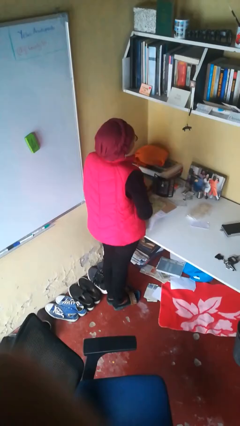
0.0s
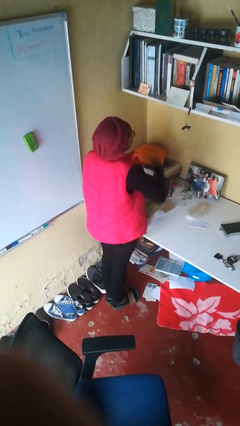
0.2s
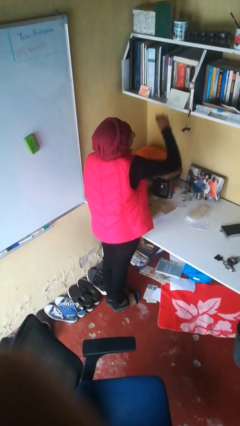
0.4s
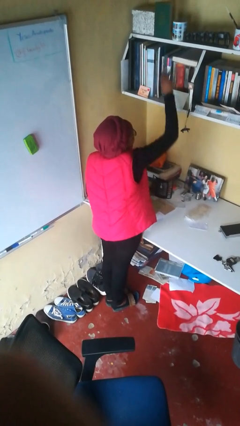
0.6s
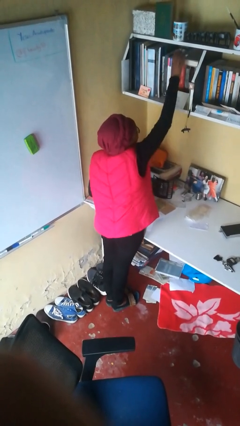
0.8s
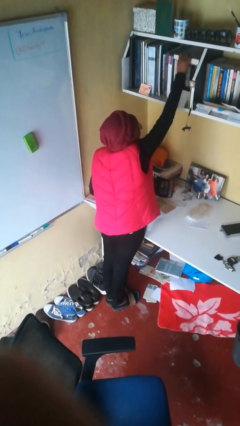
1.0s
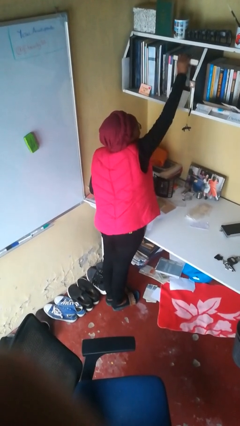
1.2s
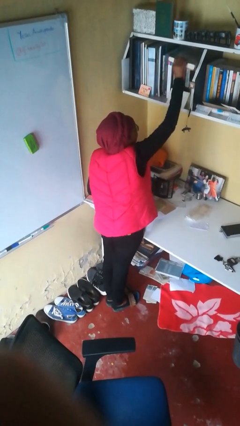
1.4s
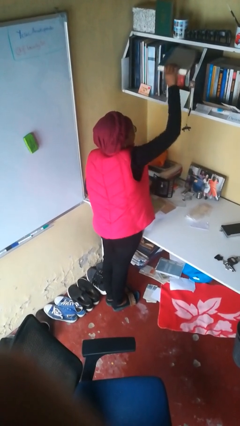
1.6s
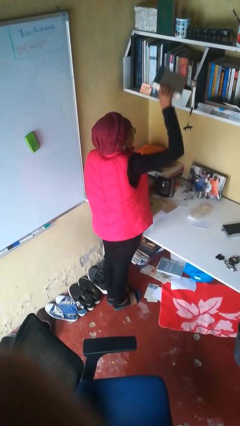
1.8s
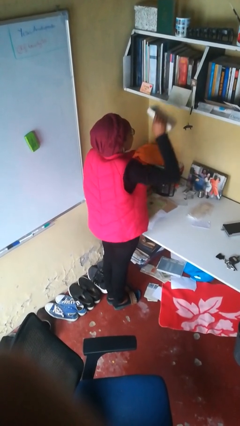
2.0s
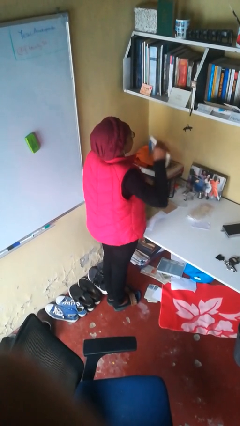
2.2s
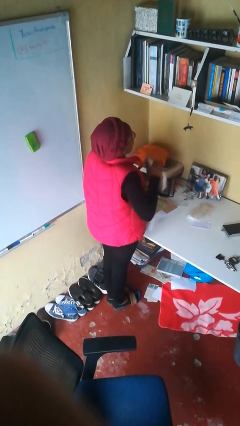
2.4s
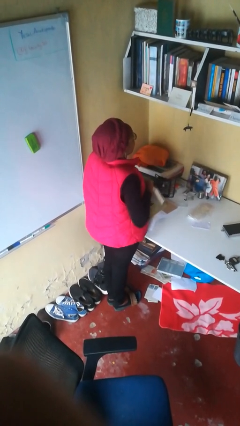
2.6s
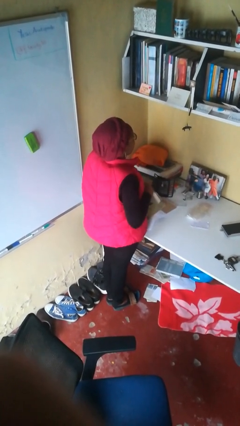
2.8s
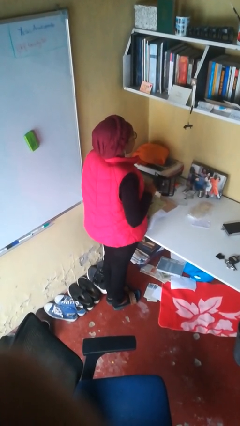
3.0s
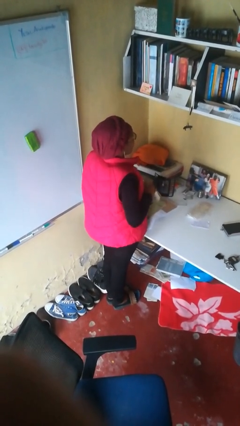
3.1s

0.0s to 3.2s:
person picks up object from shelf

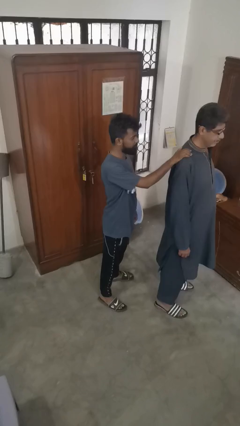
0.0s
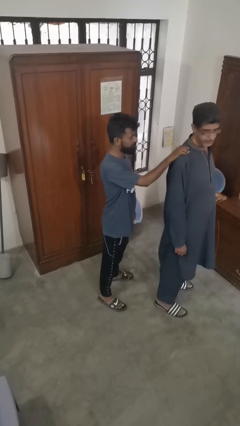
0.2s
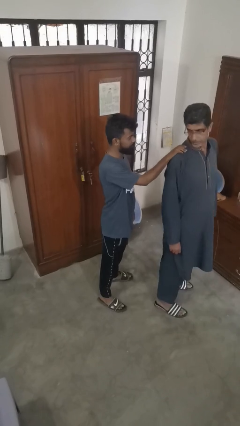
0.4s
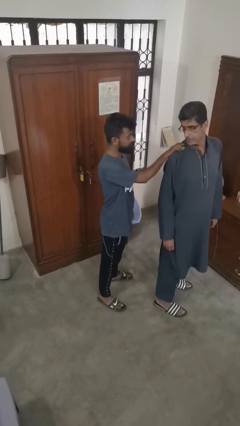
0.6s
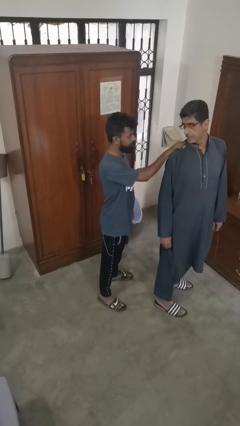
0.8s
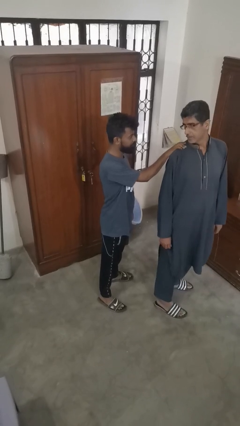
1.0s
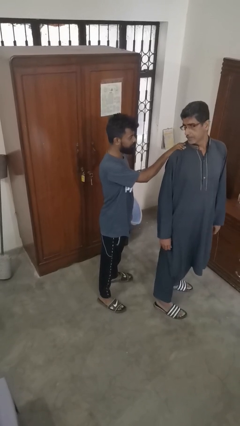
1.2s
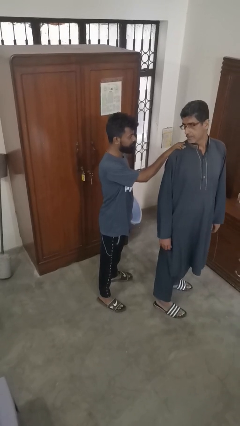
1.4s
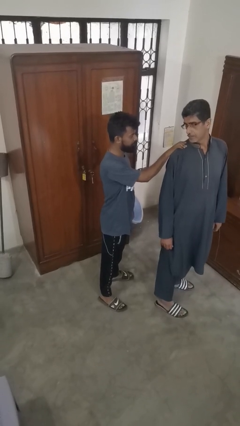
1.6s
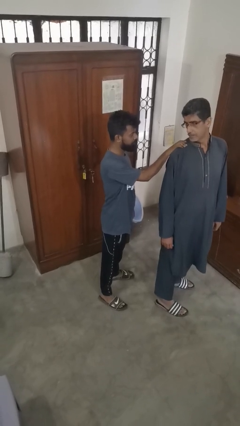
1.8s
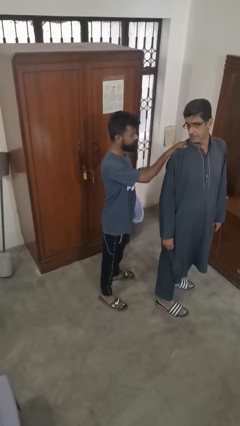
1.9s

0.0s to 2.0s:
person spins person around

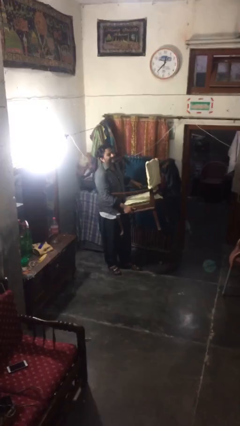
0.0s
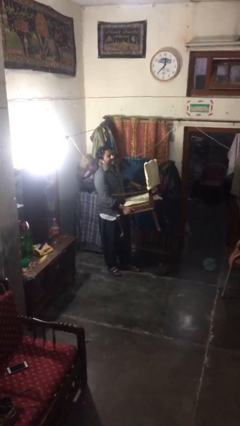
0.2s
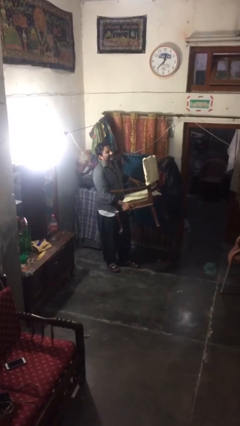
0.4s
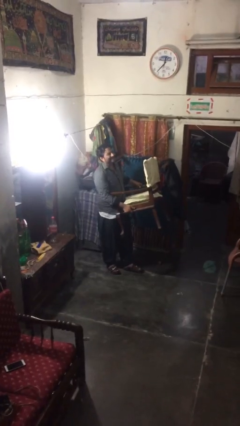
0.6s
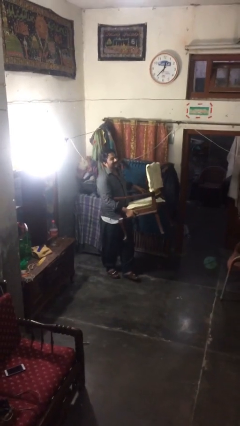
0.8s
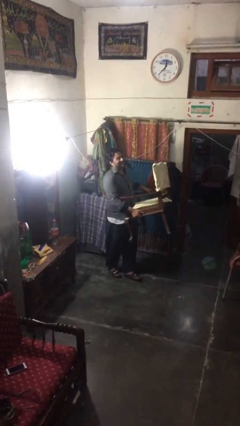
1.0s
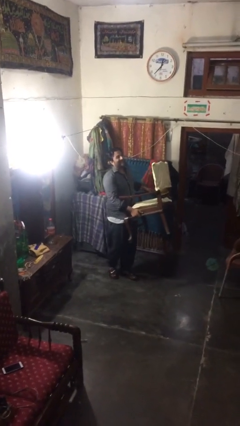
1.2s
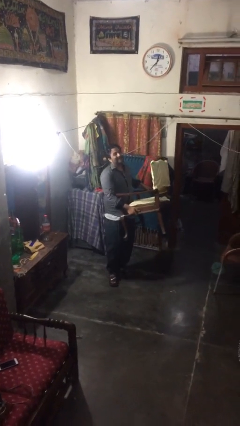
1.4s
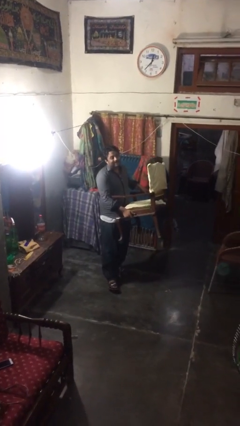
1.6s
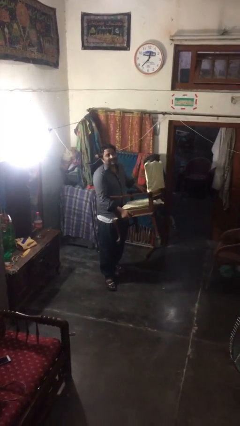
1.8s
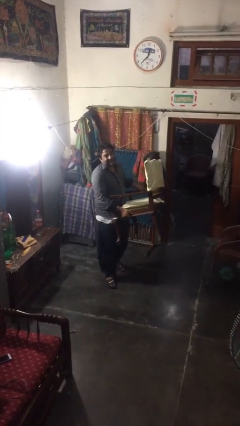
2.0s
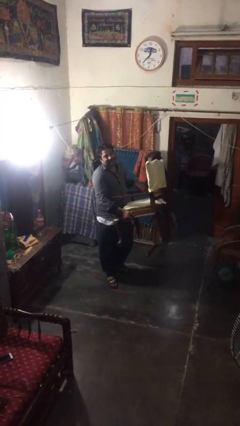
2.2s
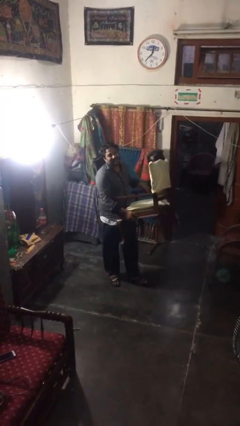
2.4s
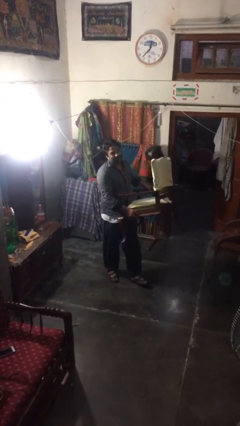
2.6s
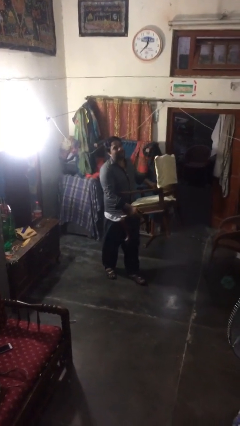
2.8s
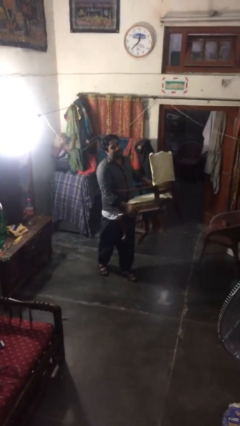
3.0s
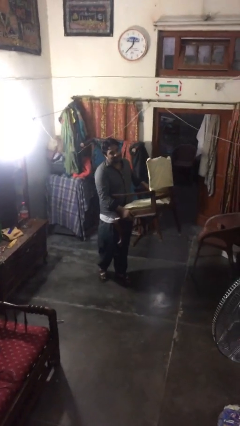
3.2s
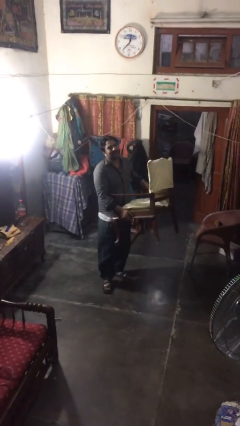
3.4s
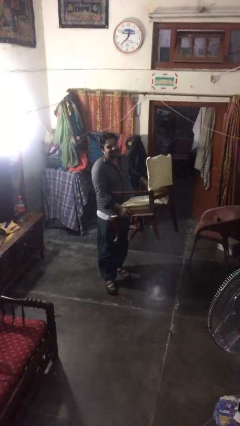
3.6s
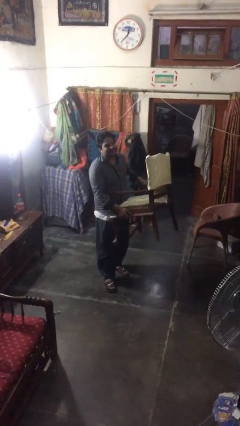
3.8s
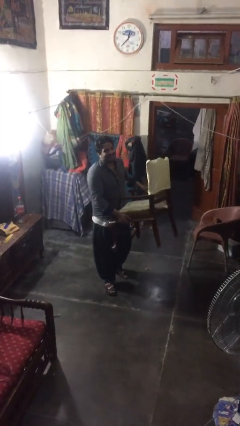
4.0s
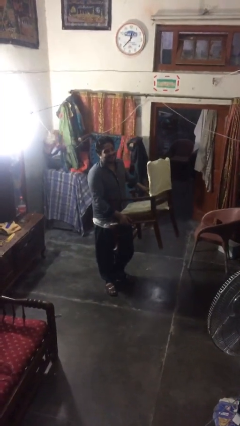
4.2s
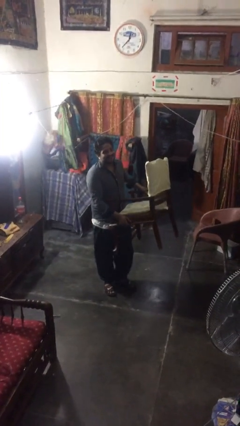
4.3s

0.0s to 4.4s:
person carries heavy object

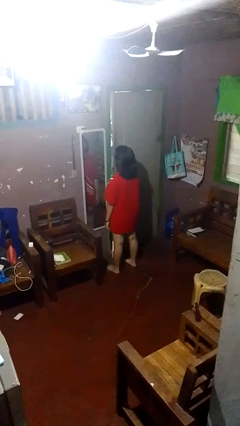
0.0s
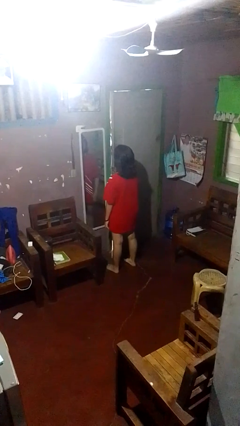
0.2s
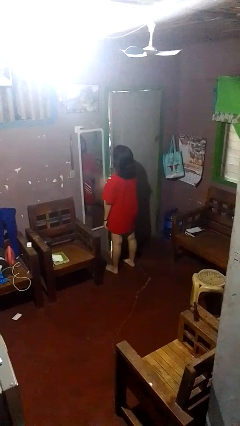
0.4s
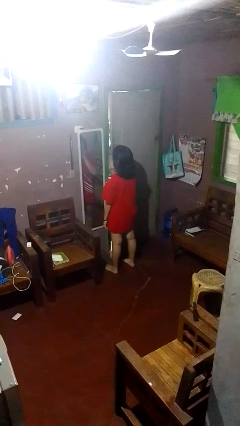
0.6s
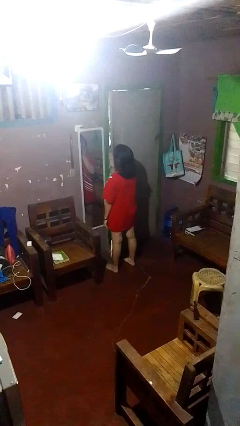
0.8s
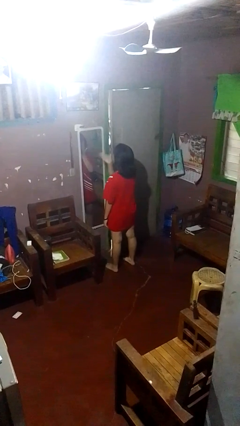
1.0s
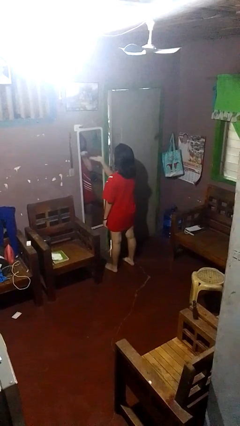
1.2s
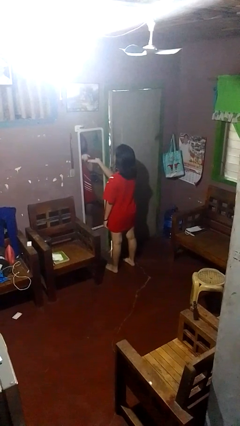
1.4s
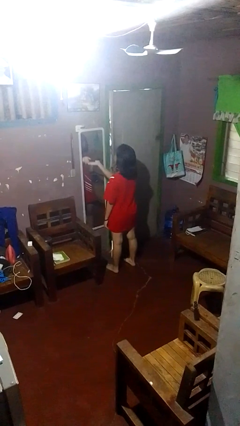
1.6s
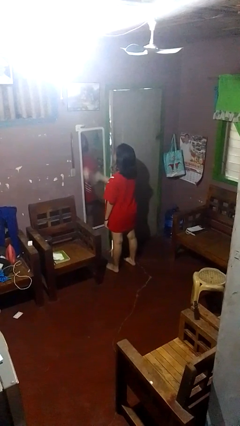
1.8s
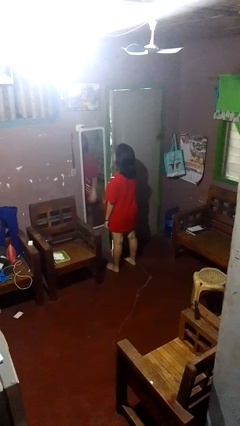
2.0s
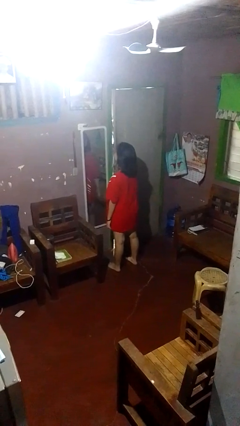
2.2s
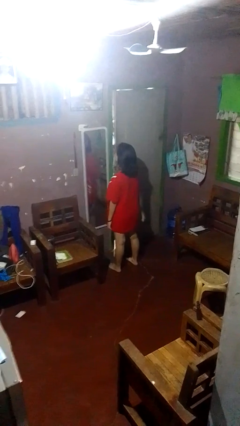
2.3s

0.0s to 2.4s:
person gestures blow kiss

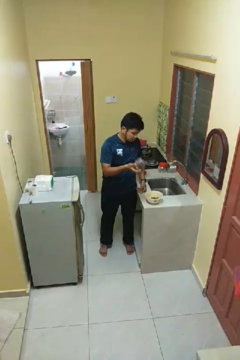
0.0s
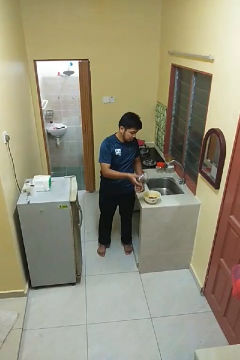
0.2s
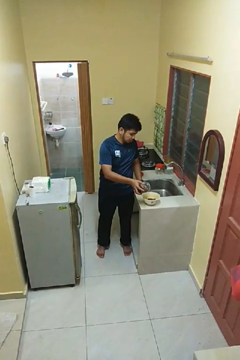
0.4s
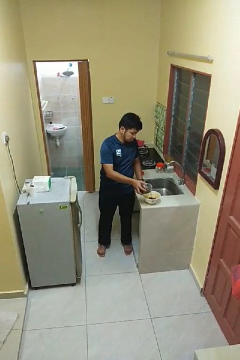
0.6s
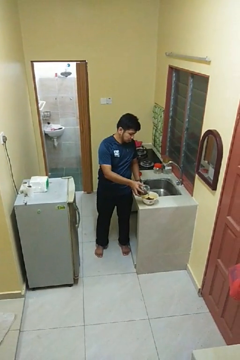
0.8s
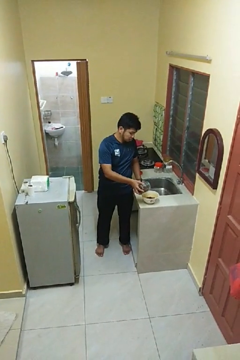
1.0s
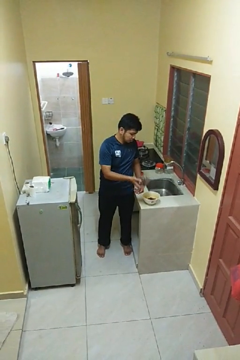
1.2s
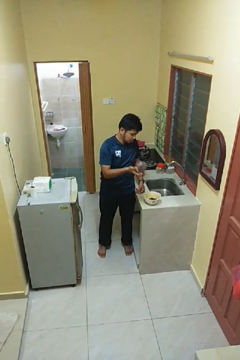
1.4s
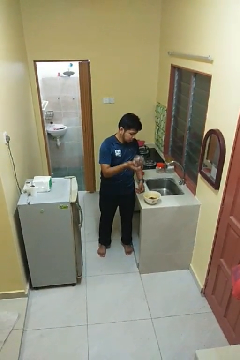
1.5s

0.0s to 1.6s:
person pours into bowl

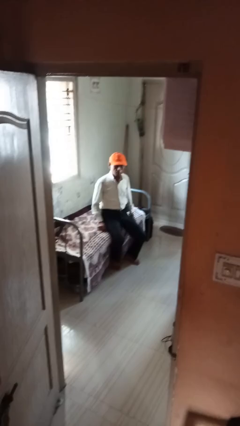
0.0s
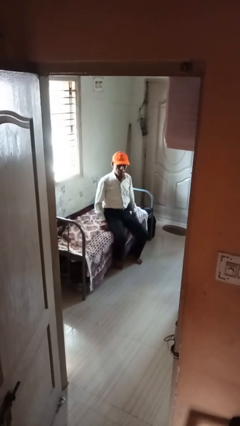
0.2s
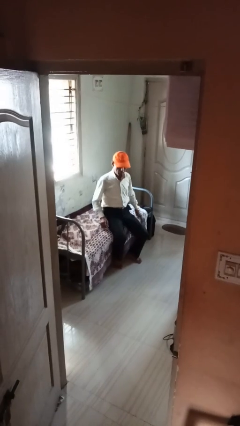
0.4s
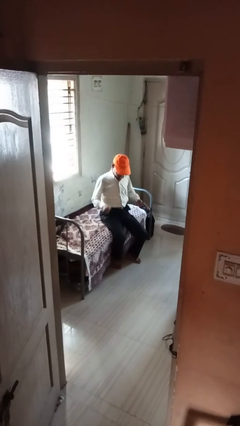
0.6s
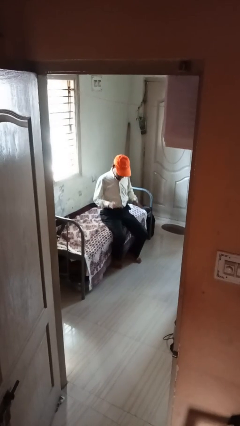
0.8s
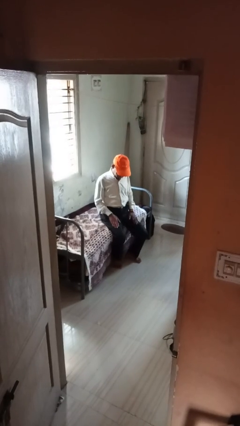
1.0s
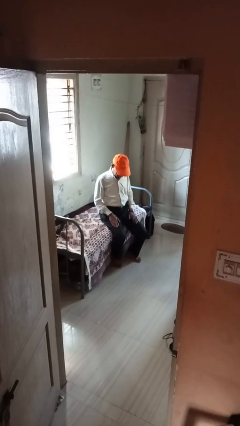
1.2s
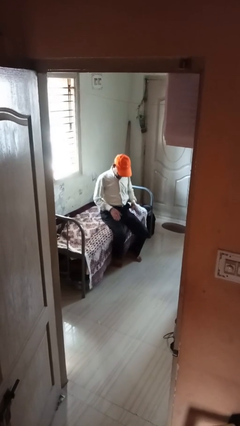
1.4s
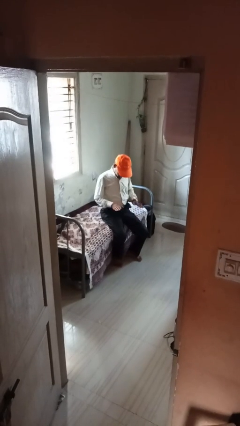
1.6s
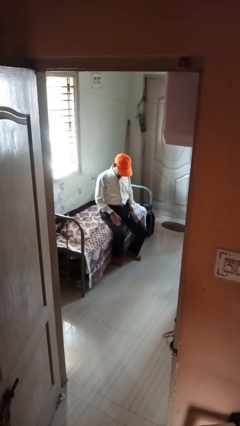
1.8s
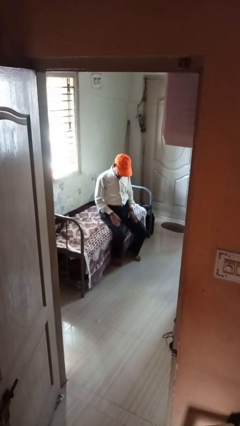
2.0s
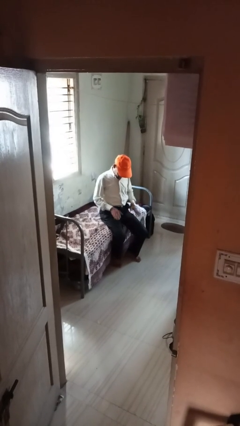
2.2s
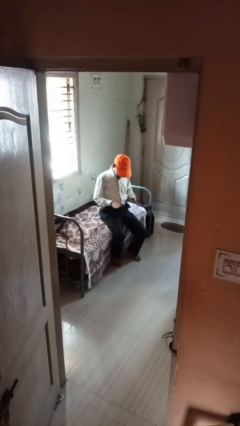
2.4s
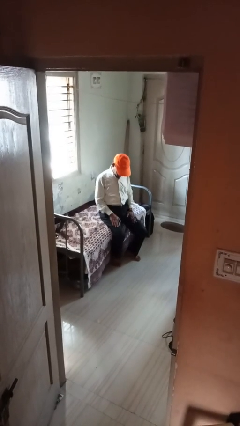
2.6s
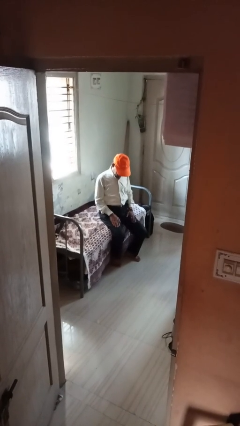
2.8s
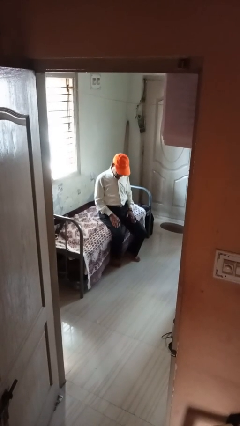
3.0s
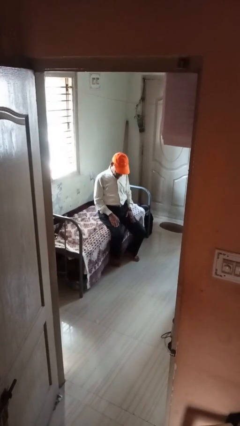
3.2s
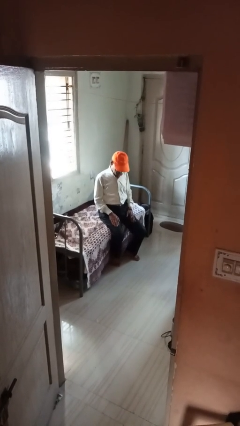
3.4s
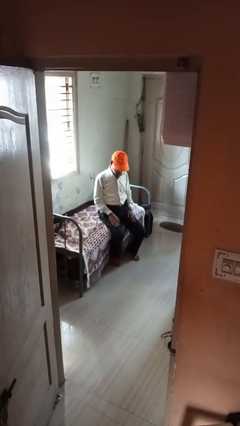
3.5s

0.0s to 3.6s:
person slaps hands on thighs

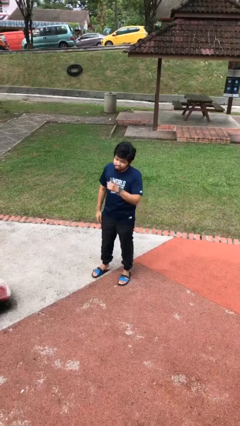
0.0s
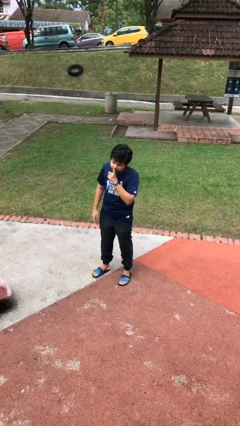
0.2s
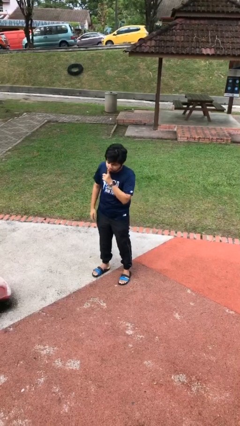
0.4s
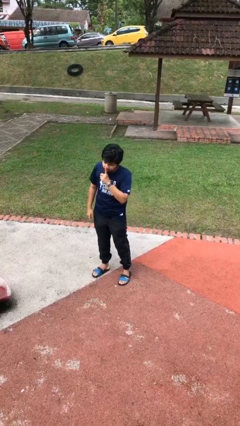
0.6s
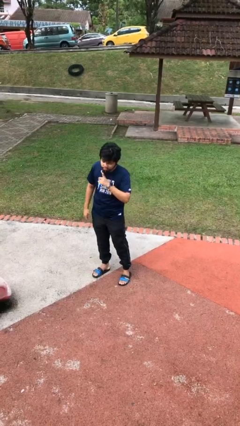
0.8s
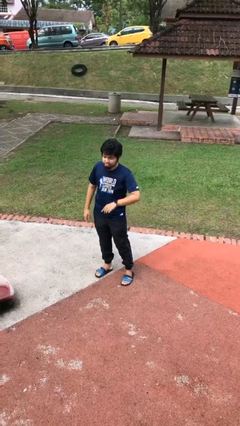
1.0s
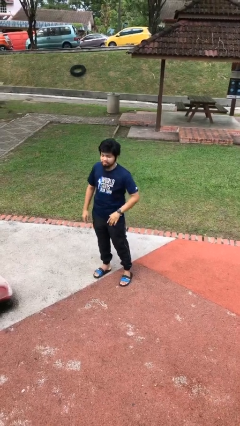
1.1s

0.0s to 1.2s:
person gestures be quiet
